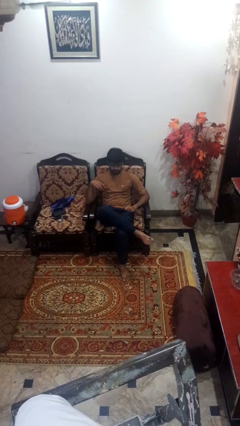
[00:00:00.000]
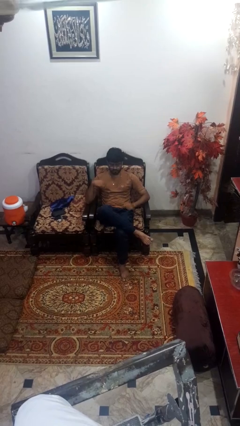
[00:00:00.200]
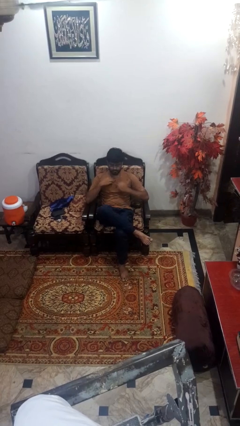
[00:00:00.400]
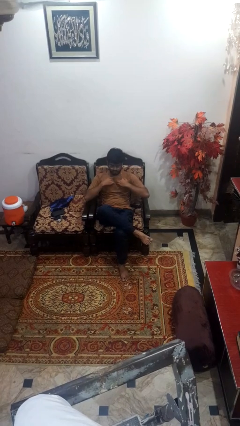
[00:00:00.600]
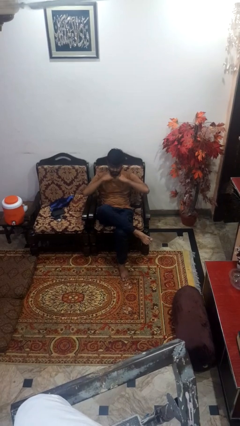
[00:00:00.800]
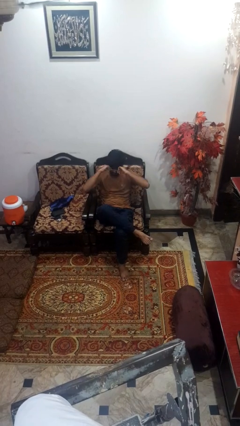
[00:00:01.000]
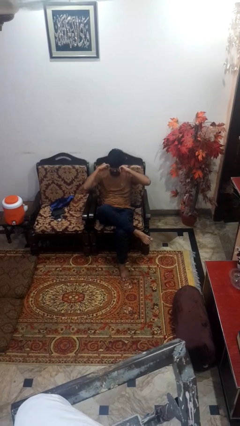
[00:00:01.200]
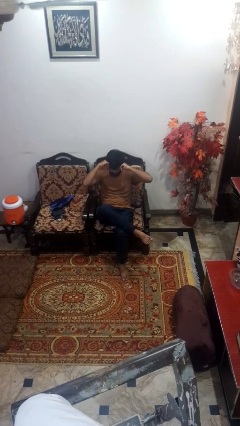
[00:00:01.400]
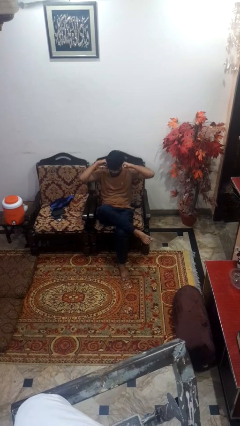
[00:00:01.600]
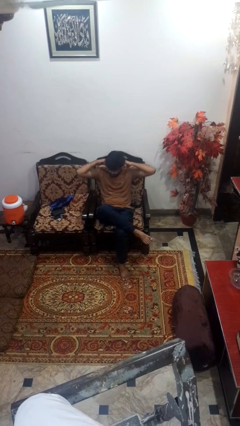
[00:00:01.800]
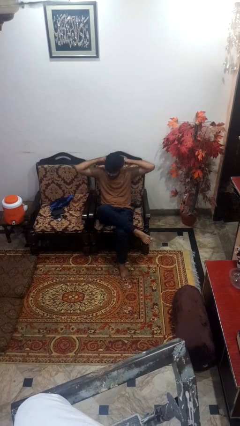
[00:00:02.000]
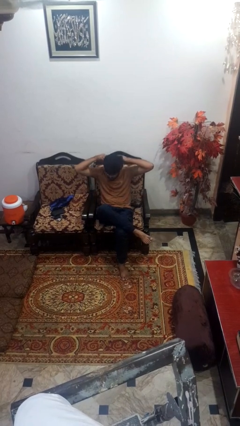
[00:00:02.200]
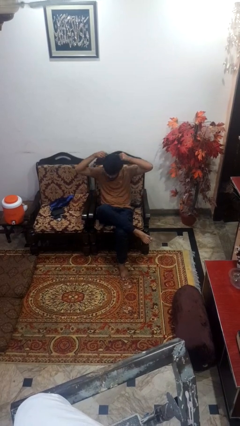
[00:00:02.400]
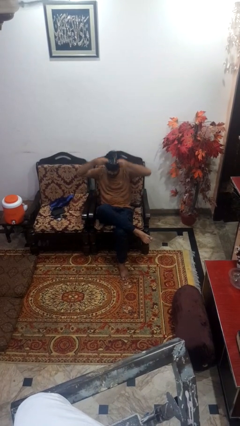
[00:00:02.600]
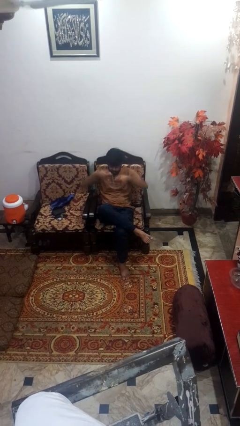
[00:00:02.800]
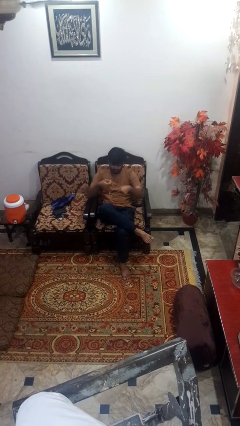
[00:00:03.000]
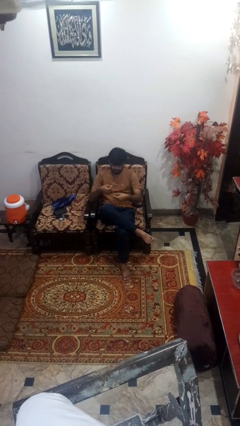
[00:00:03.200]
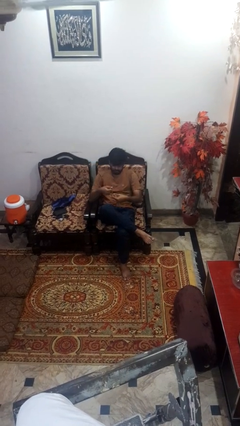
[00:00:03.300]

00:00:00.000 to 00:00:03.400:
person takes off necklace

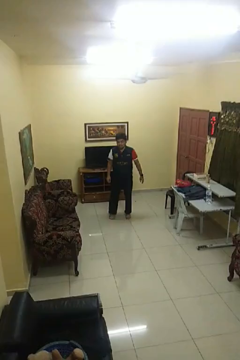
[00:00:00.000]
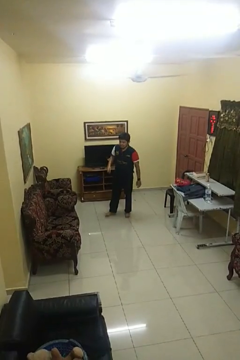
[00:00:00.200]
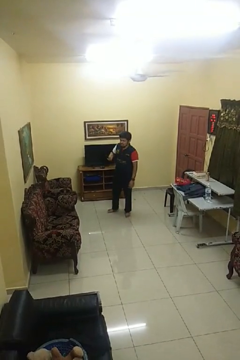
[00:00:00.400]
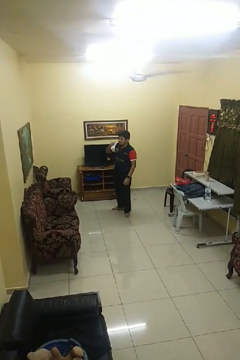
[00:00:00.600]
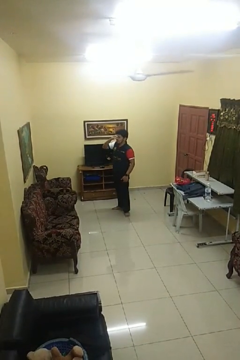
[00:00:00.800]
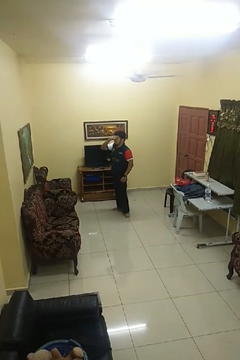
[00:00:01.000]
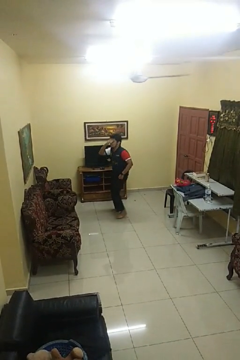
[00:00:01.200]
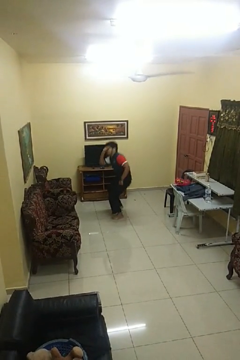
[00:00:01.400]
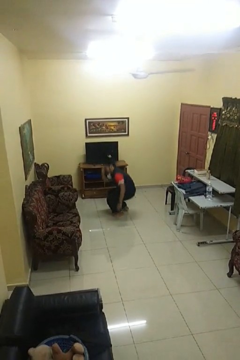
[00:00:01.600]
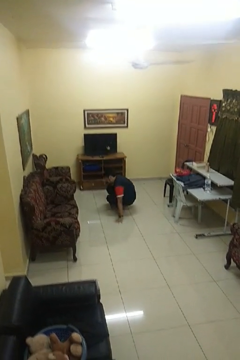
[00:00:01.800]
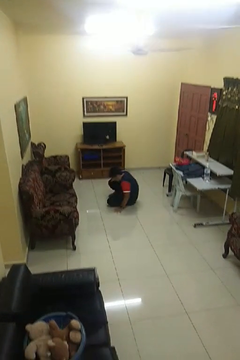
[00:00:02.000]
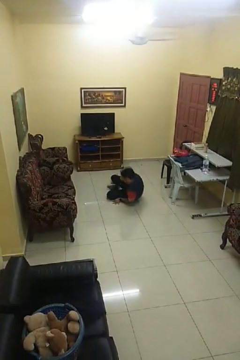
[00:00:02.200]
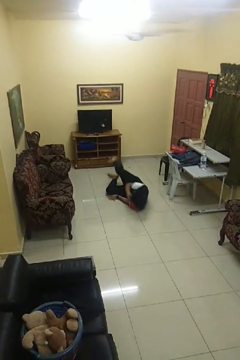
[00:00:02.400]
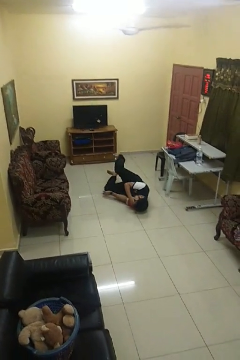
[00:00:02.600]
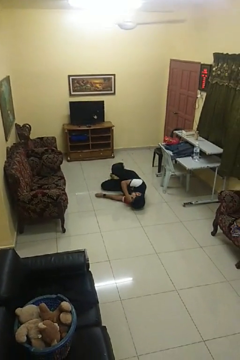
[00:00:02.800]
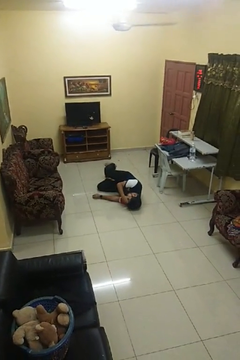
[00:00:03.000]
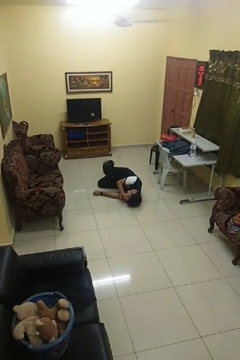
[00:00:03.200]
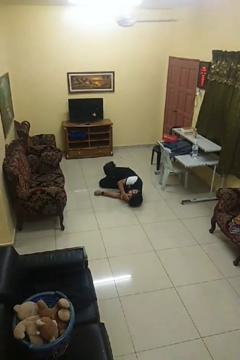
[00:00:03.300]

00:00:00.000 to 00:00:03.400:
person falls while standing

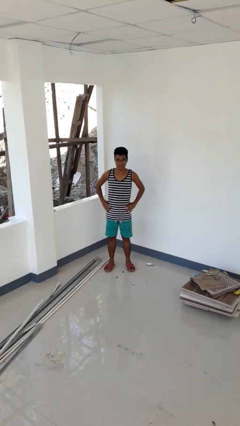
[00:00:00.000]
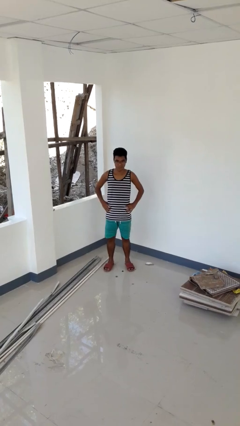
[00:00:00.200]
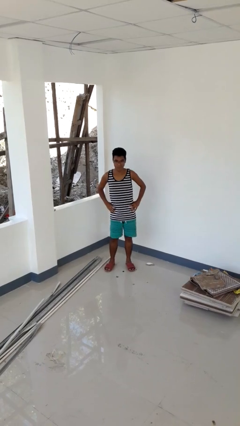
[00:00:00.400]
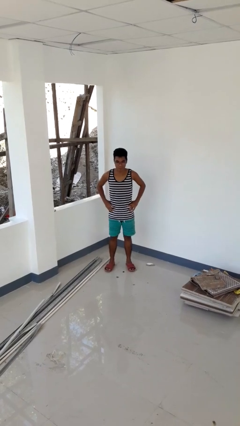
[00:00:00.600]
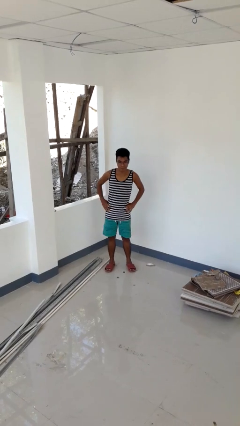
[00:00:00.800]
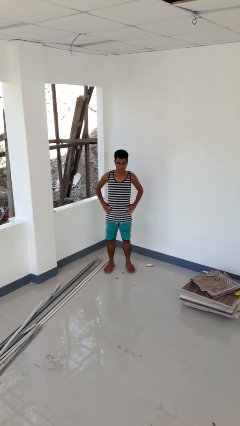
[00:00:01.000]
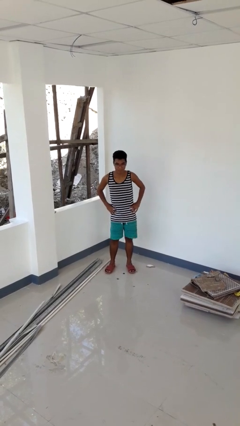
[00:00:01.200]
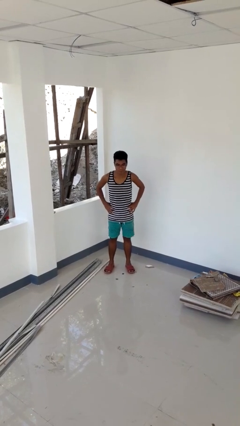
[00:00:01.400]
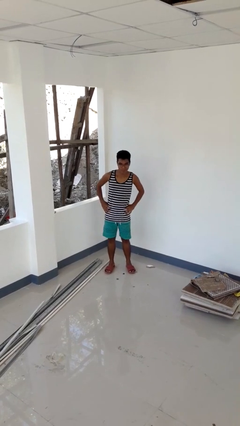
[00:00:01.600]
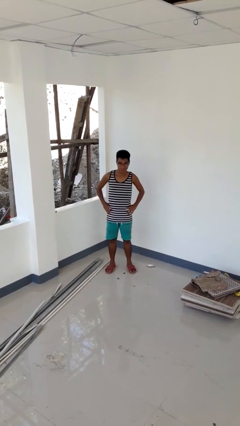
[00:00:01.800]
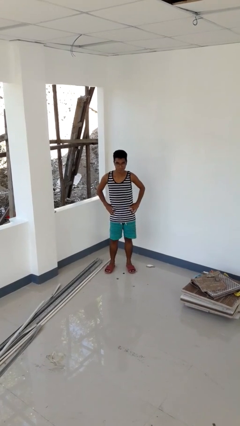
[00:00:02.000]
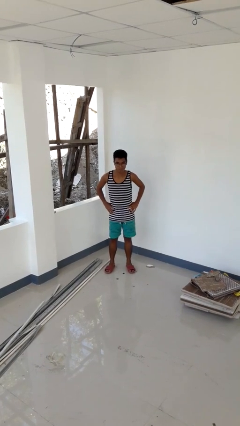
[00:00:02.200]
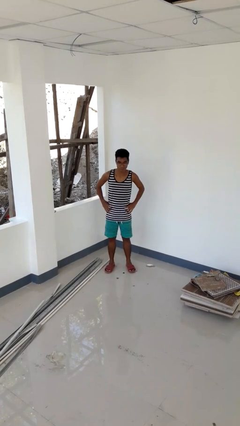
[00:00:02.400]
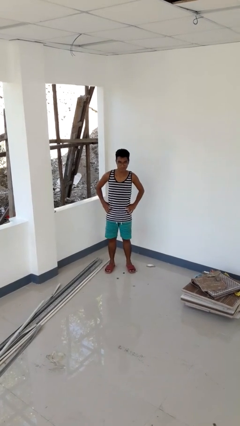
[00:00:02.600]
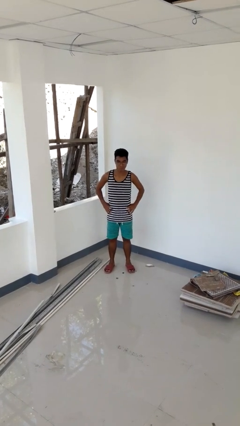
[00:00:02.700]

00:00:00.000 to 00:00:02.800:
person wiggles hips

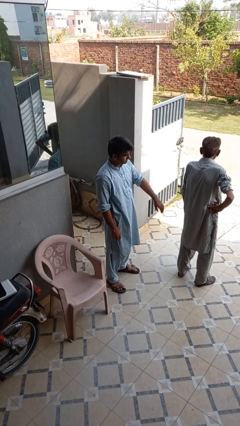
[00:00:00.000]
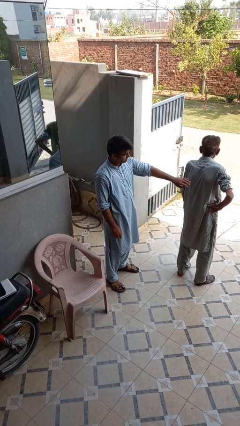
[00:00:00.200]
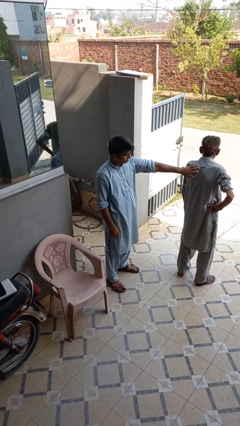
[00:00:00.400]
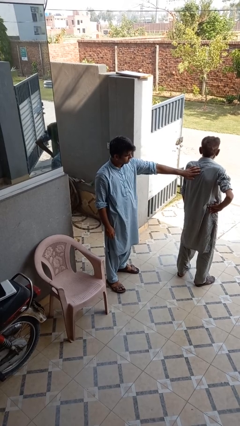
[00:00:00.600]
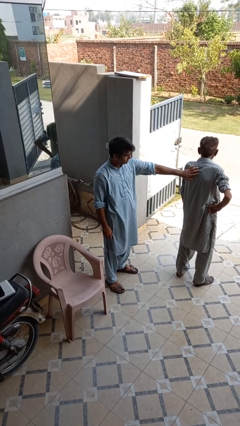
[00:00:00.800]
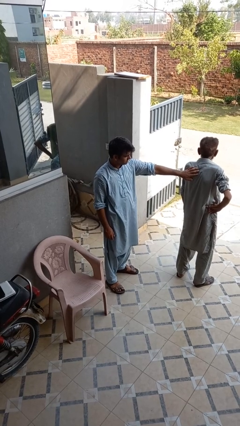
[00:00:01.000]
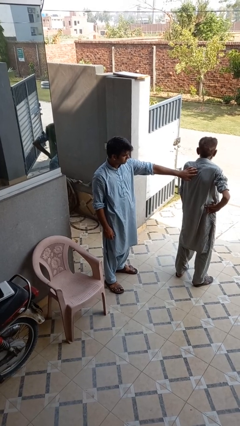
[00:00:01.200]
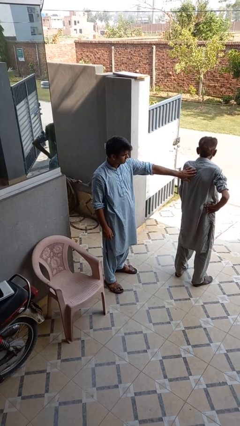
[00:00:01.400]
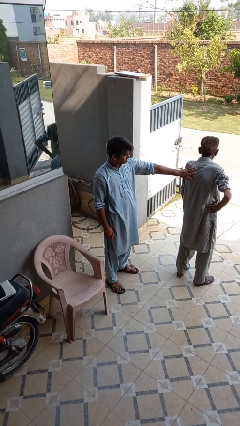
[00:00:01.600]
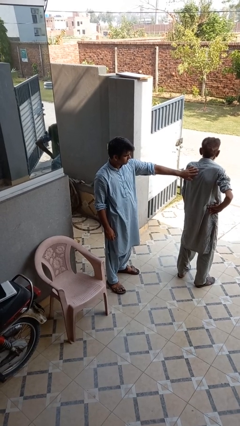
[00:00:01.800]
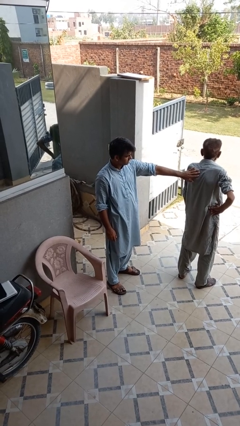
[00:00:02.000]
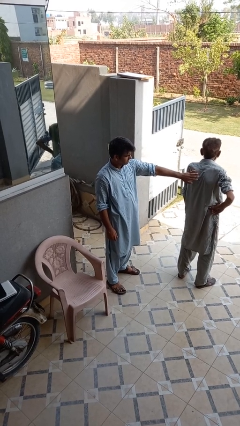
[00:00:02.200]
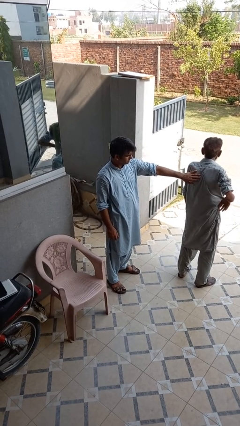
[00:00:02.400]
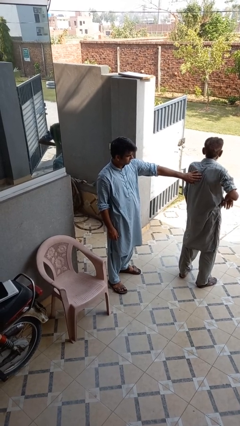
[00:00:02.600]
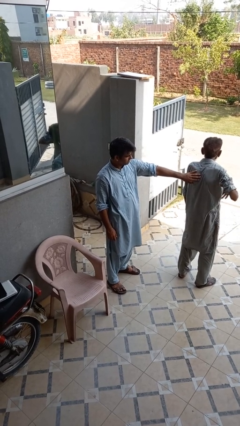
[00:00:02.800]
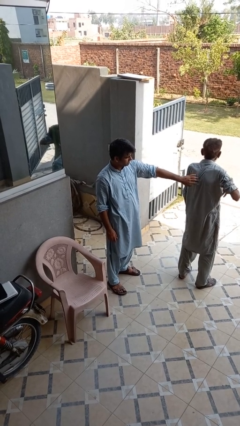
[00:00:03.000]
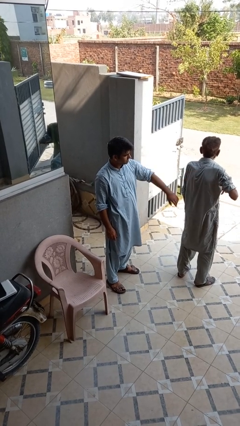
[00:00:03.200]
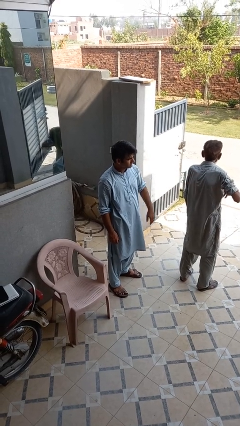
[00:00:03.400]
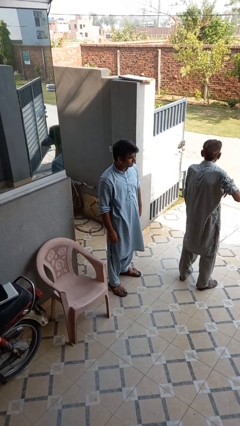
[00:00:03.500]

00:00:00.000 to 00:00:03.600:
person touches back of person

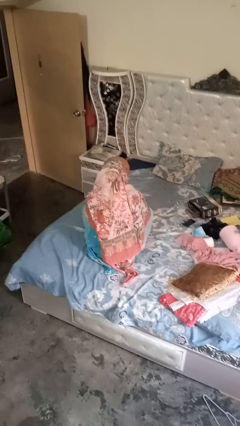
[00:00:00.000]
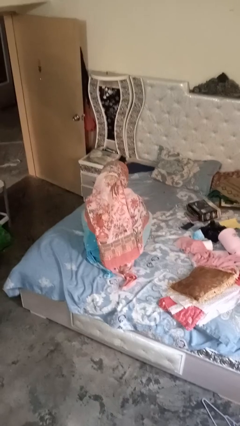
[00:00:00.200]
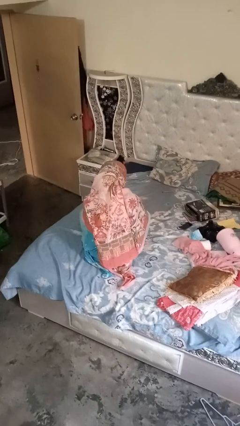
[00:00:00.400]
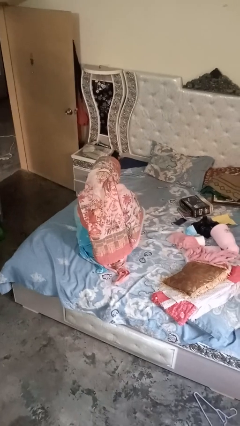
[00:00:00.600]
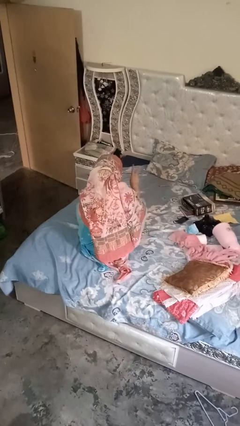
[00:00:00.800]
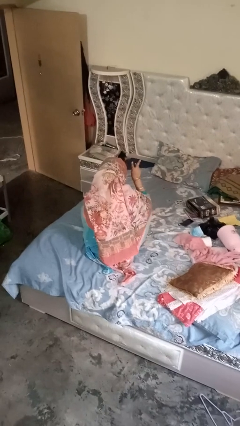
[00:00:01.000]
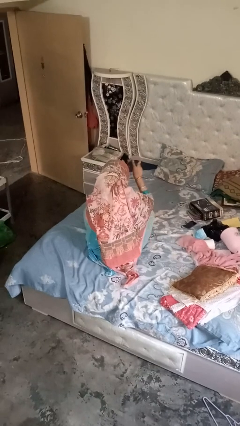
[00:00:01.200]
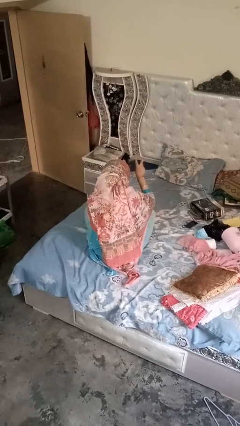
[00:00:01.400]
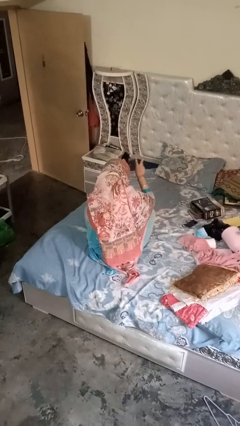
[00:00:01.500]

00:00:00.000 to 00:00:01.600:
person gestures be quiet

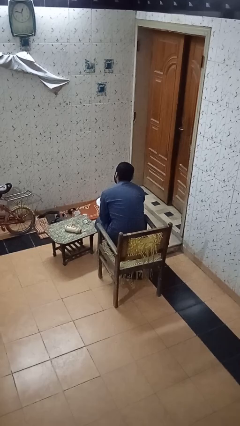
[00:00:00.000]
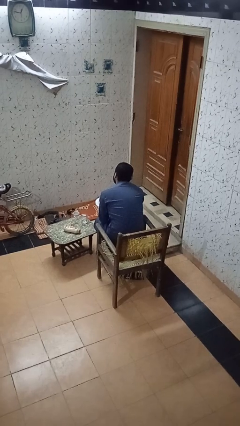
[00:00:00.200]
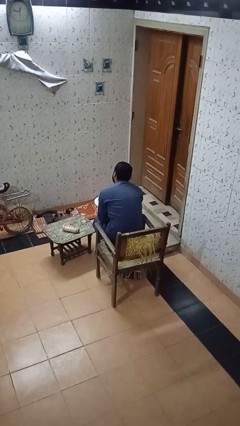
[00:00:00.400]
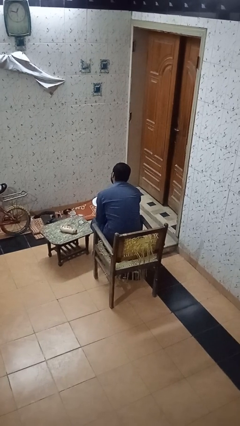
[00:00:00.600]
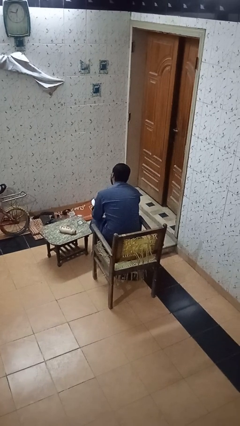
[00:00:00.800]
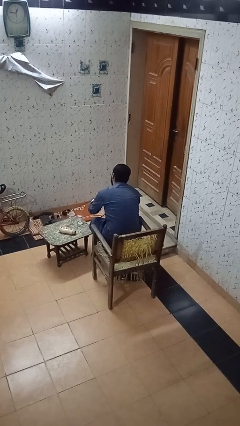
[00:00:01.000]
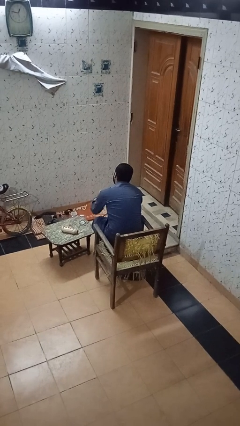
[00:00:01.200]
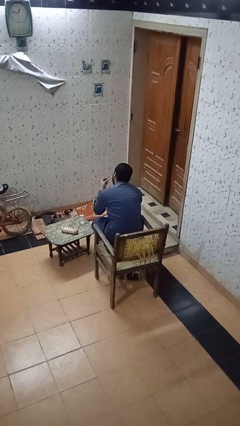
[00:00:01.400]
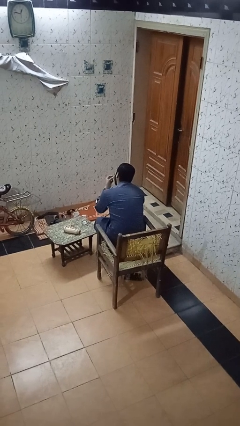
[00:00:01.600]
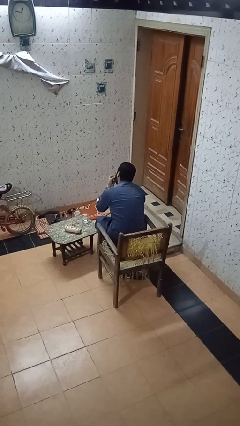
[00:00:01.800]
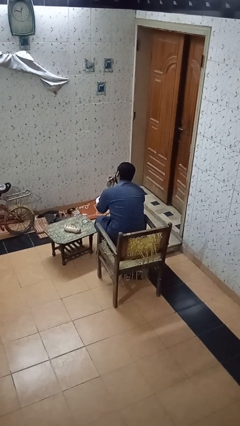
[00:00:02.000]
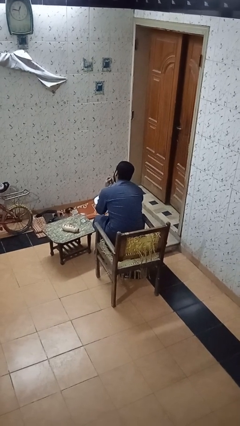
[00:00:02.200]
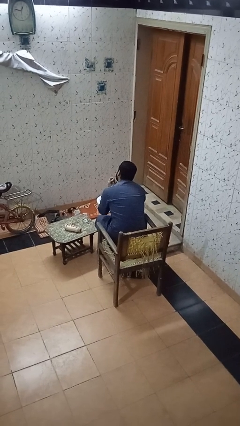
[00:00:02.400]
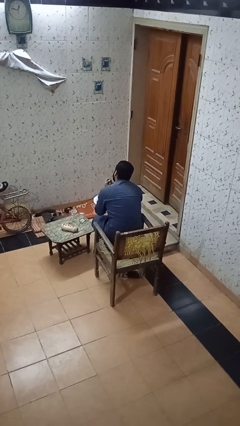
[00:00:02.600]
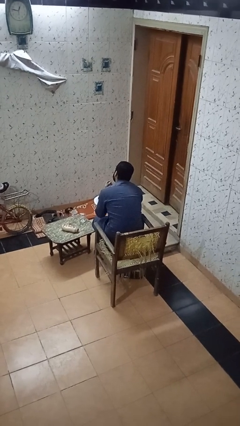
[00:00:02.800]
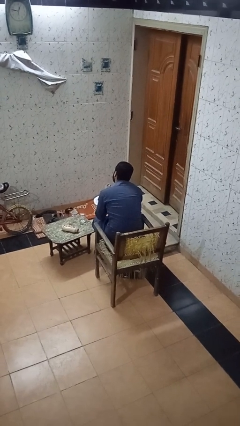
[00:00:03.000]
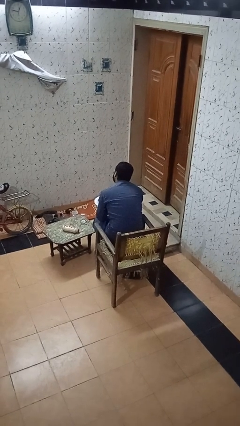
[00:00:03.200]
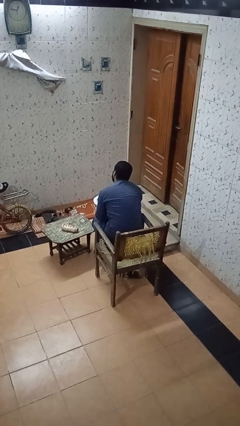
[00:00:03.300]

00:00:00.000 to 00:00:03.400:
person eats with hands
